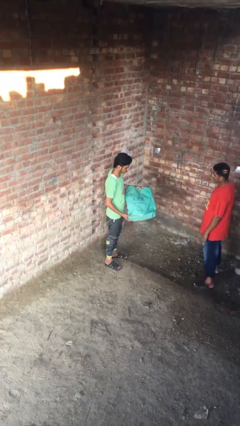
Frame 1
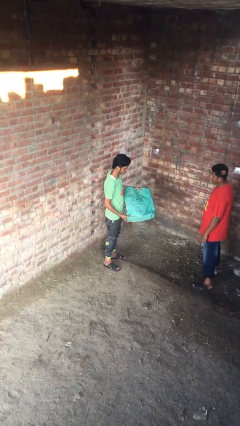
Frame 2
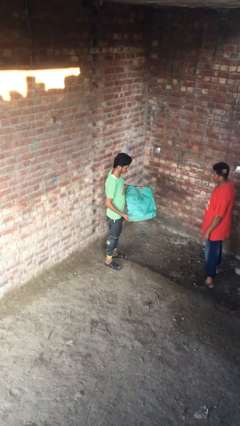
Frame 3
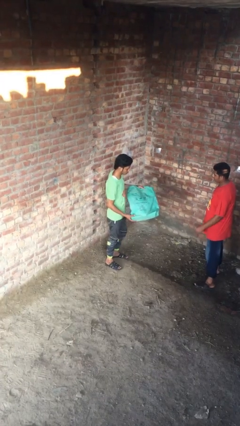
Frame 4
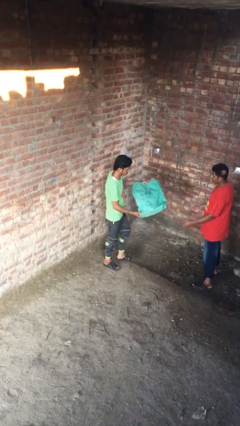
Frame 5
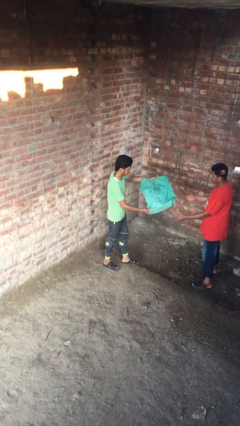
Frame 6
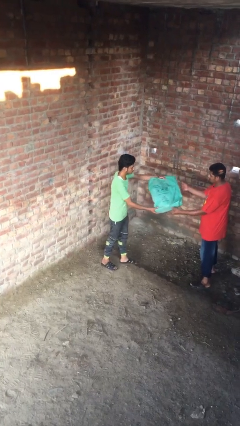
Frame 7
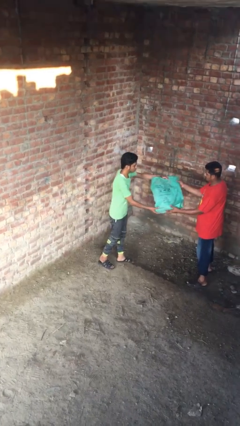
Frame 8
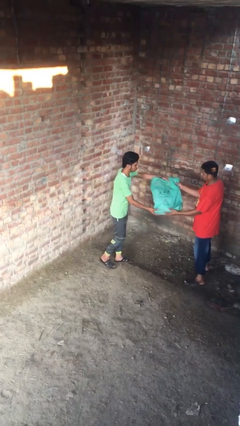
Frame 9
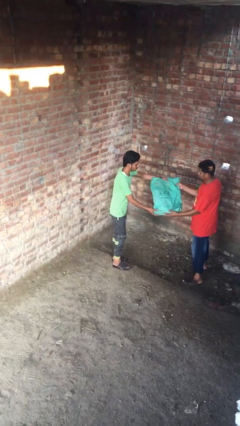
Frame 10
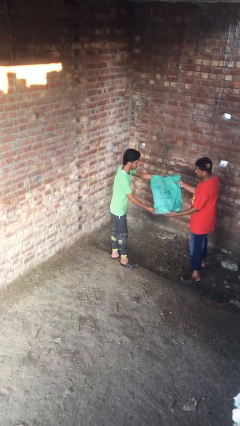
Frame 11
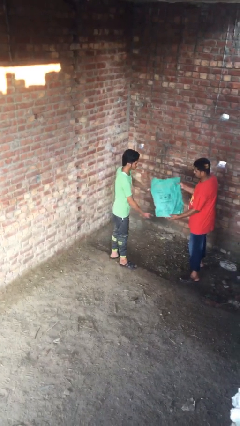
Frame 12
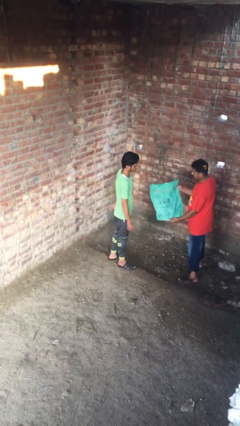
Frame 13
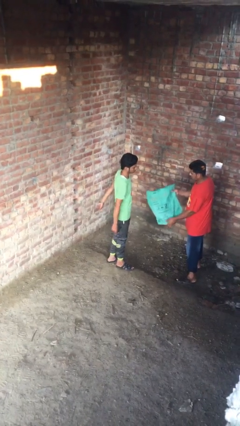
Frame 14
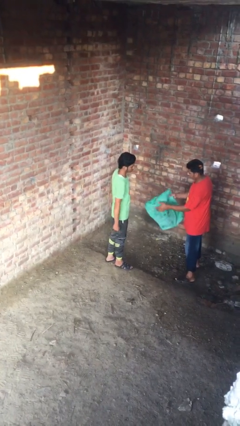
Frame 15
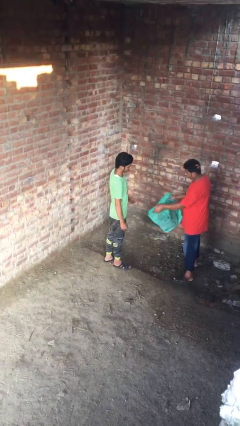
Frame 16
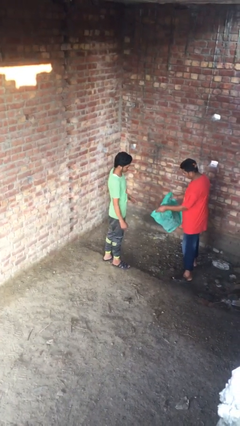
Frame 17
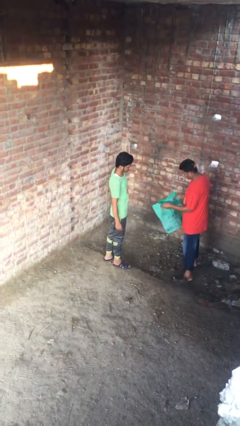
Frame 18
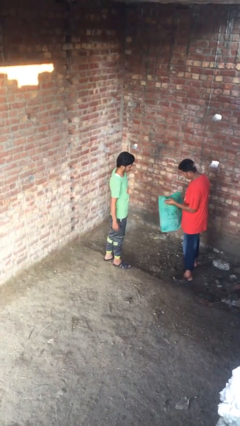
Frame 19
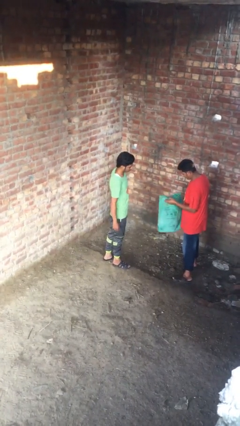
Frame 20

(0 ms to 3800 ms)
person transfers object to person

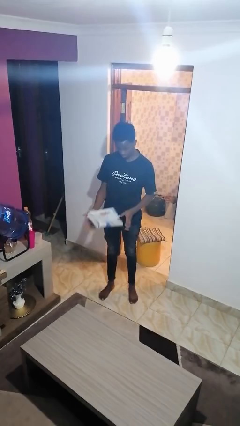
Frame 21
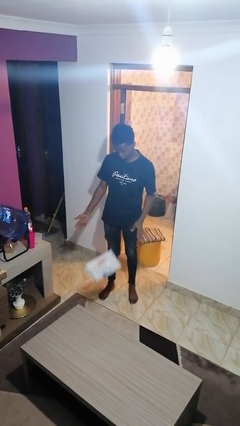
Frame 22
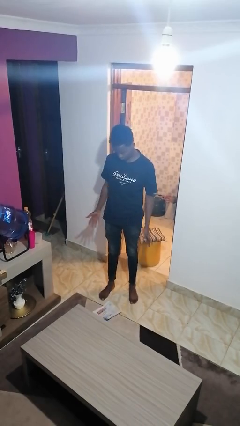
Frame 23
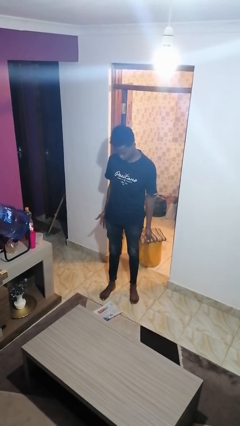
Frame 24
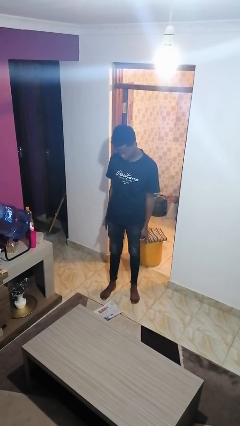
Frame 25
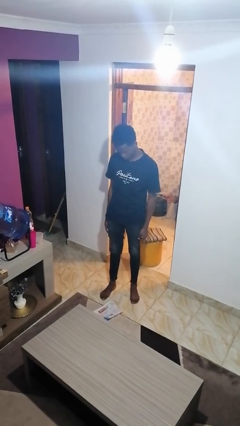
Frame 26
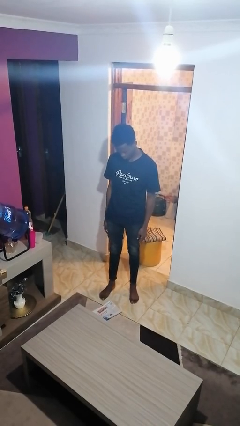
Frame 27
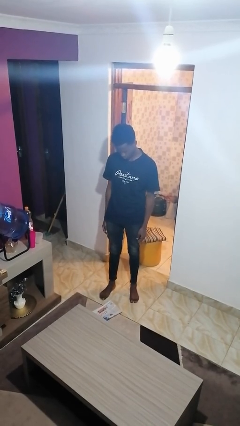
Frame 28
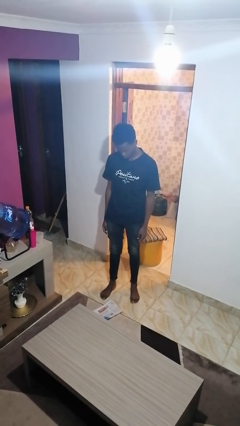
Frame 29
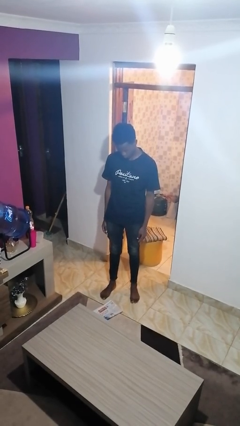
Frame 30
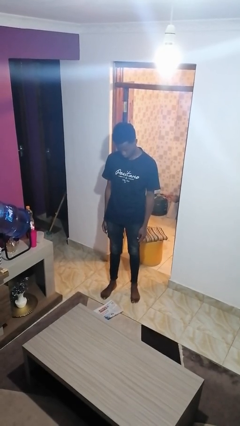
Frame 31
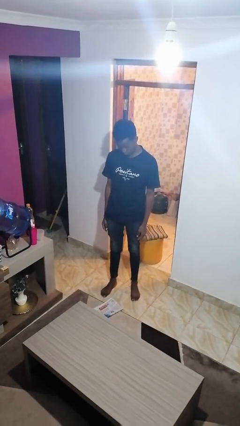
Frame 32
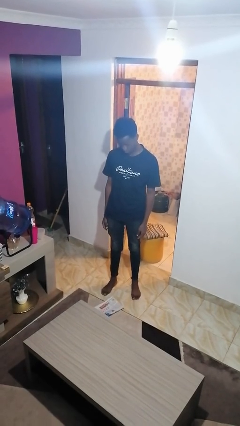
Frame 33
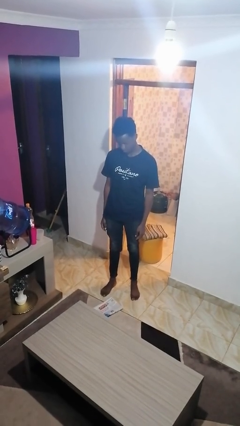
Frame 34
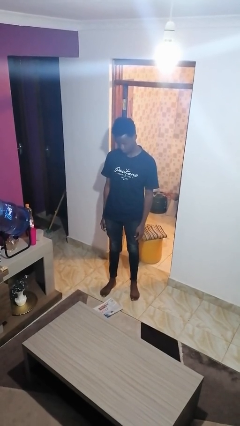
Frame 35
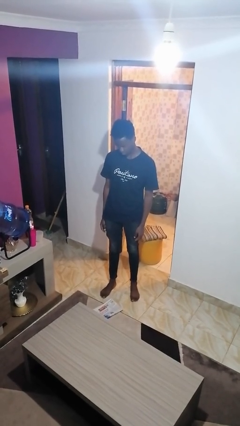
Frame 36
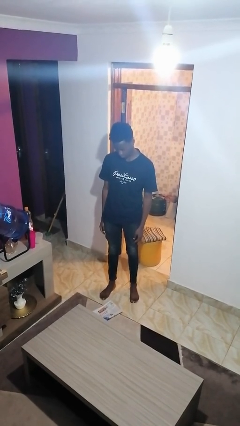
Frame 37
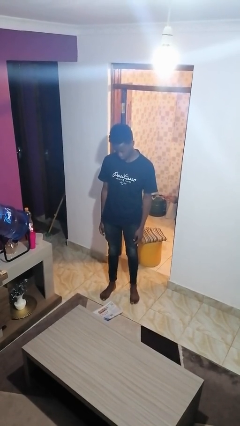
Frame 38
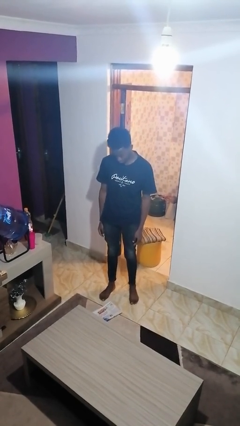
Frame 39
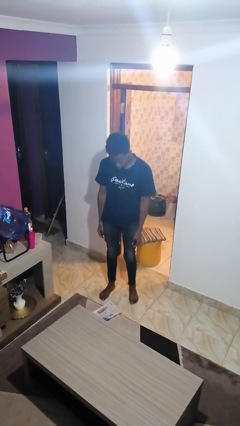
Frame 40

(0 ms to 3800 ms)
person drops object

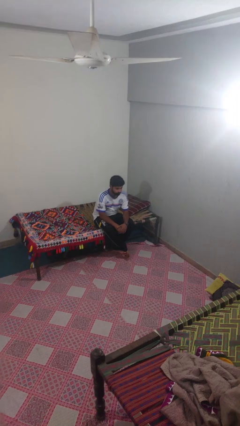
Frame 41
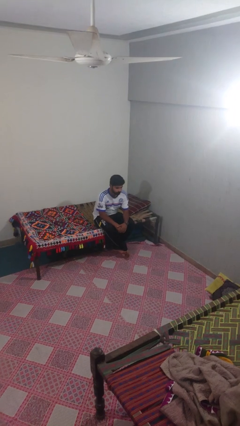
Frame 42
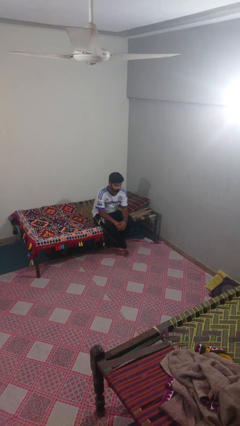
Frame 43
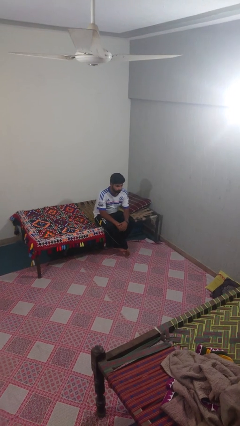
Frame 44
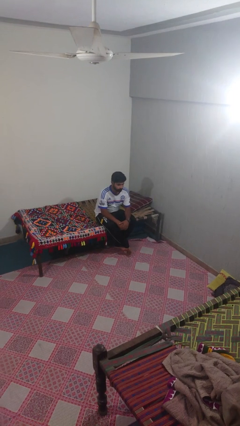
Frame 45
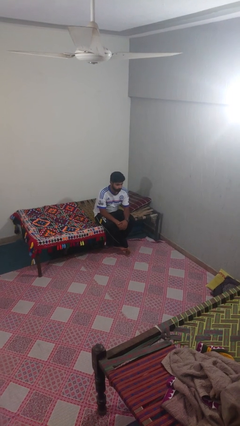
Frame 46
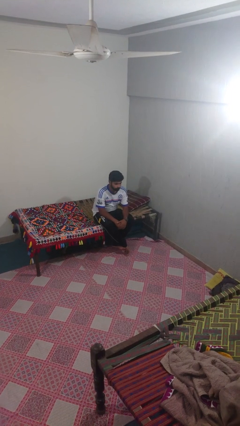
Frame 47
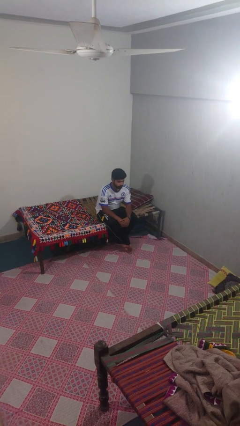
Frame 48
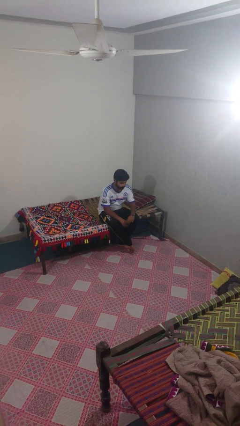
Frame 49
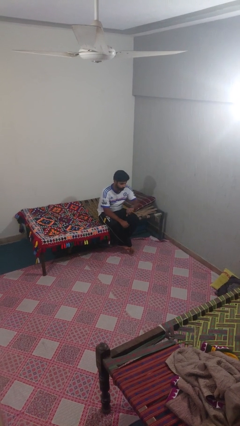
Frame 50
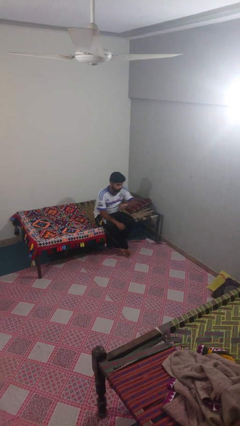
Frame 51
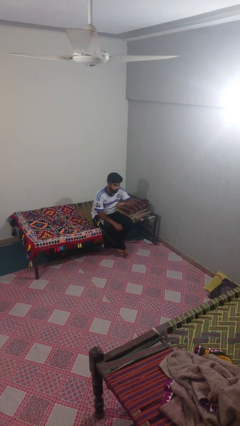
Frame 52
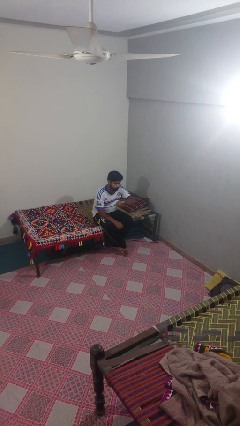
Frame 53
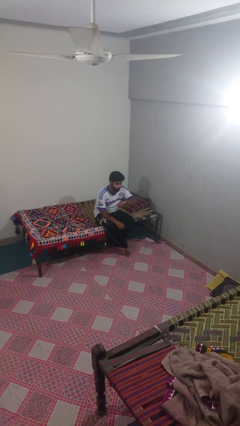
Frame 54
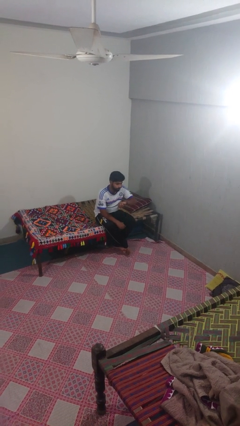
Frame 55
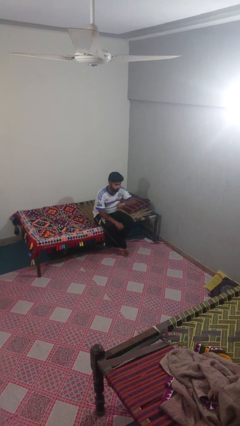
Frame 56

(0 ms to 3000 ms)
person looks at wristwatch

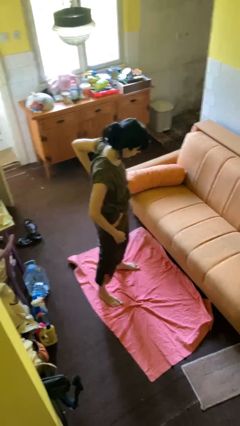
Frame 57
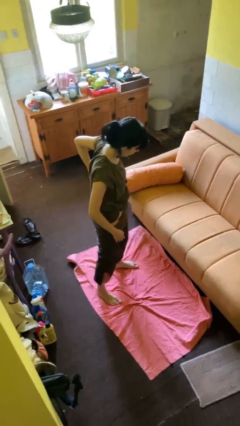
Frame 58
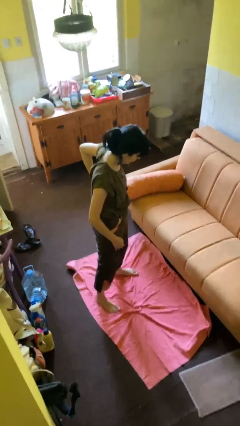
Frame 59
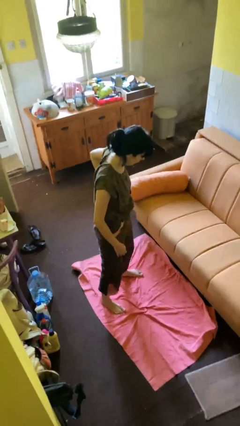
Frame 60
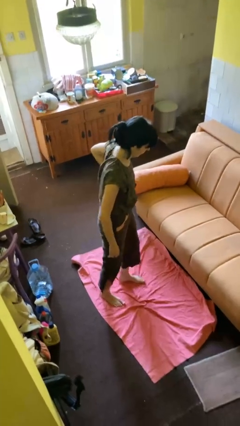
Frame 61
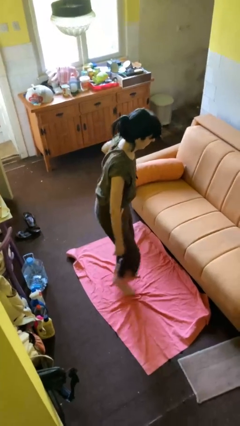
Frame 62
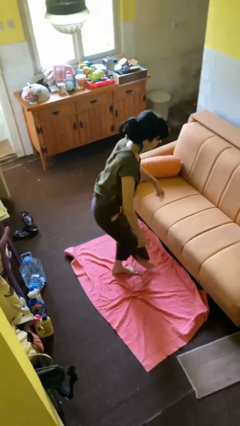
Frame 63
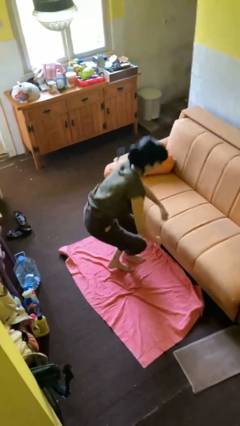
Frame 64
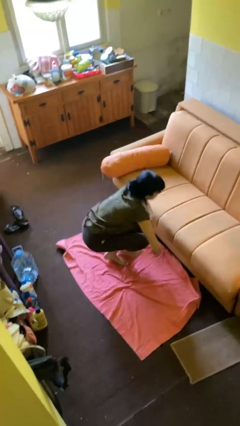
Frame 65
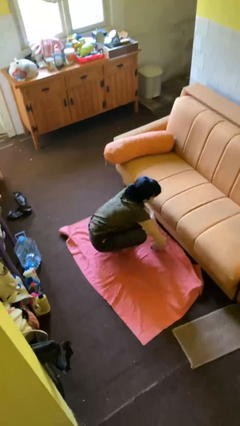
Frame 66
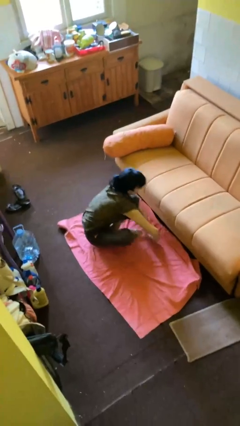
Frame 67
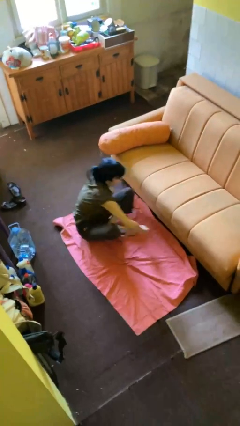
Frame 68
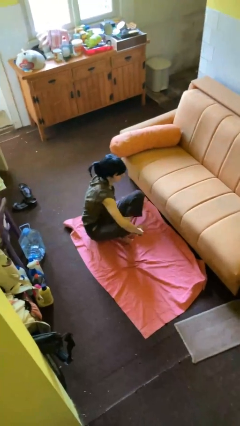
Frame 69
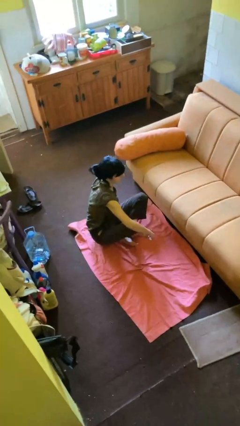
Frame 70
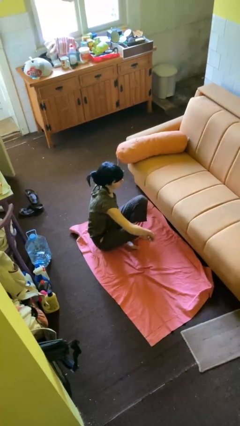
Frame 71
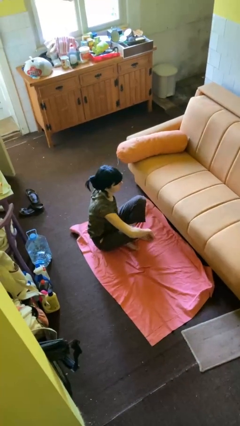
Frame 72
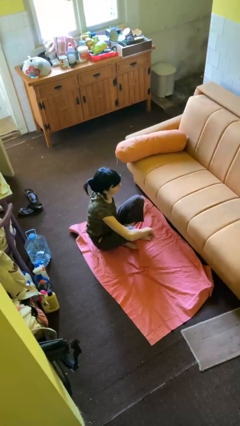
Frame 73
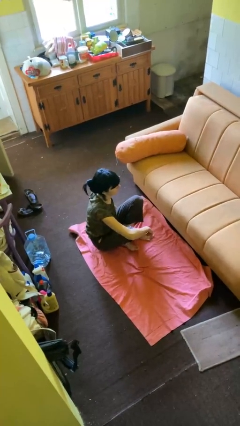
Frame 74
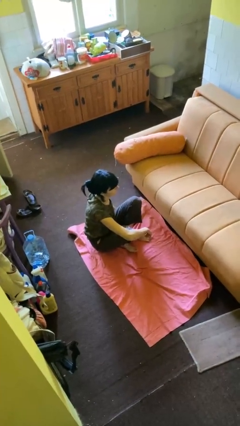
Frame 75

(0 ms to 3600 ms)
person sits crisscross

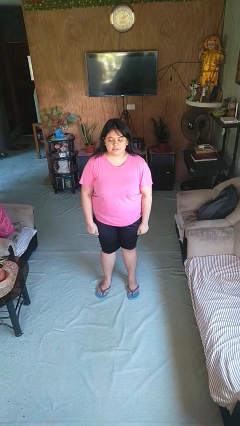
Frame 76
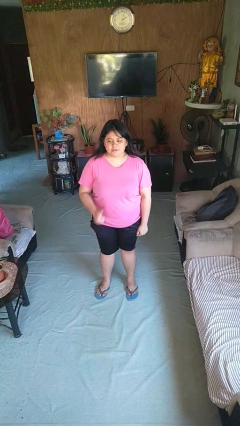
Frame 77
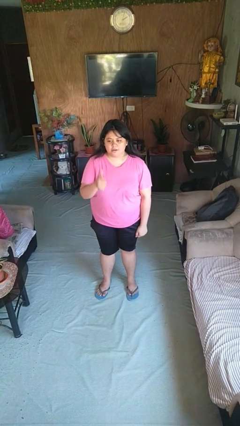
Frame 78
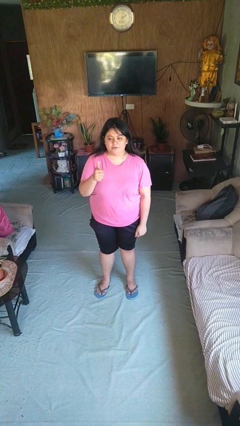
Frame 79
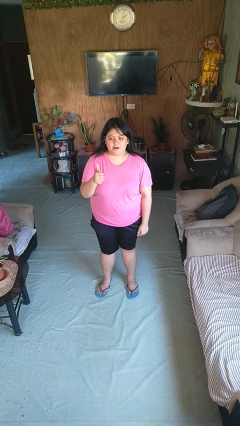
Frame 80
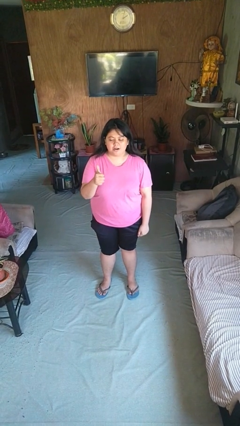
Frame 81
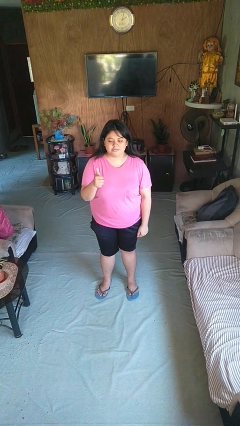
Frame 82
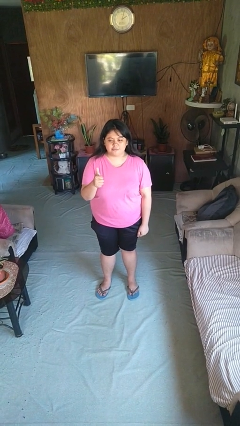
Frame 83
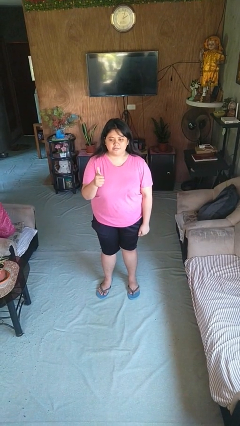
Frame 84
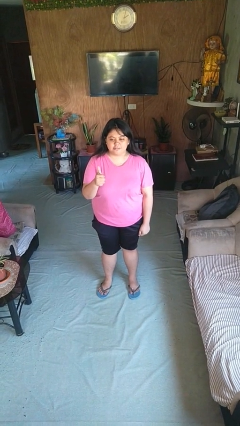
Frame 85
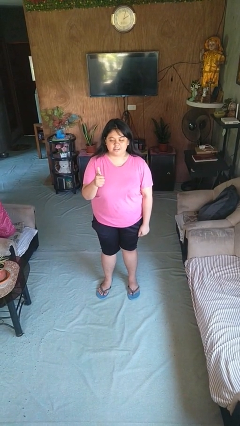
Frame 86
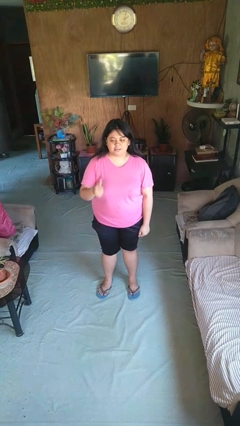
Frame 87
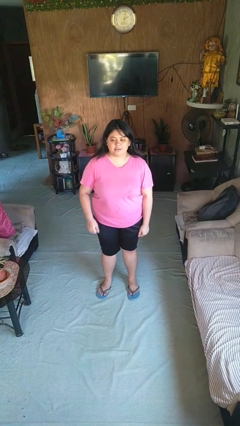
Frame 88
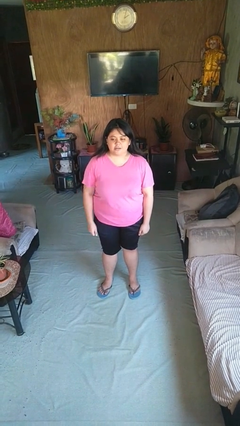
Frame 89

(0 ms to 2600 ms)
person gestures thumbs up

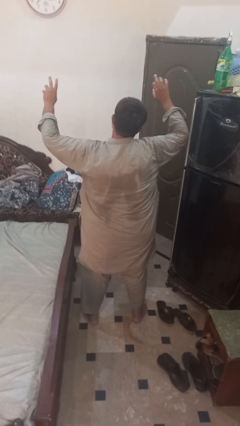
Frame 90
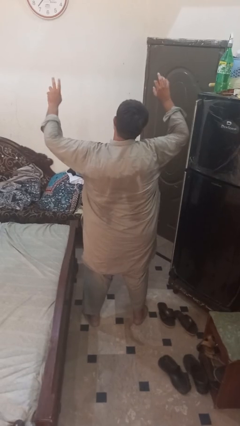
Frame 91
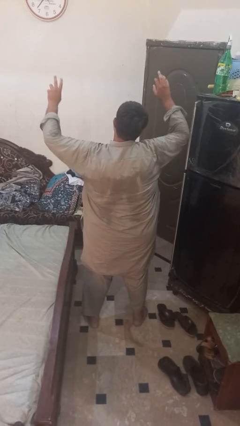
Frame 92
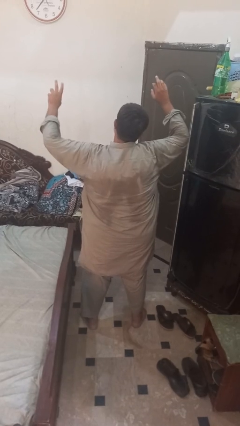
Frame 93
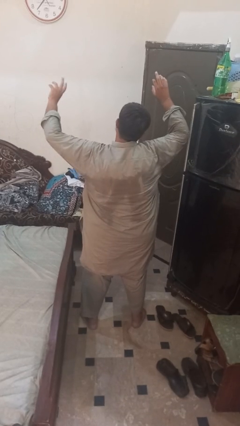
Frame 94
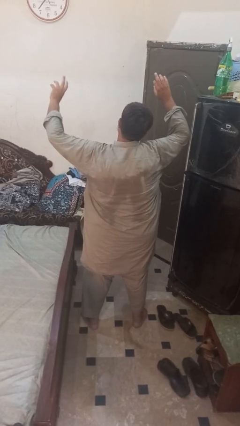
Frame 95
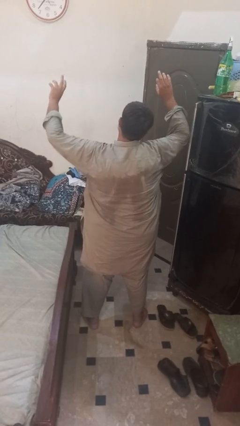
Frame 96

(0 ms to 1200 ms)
person dances in place
